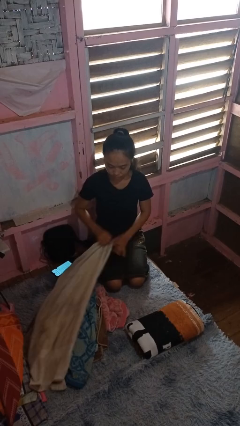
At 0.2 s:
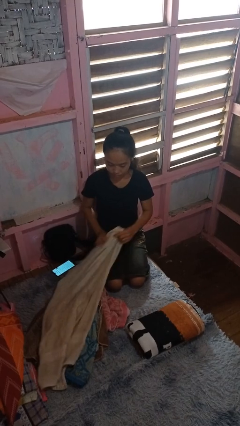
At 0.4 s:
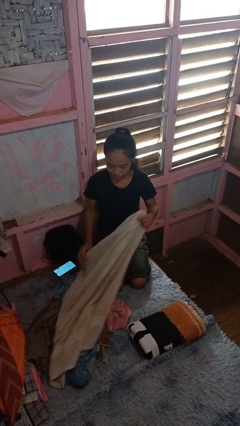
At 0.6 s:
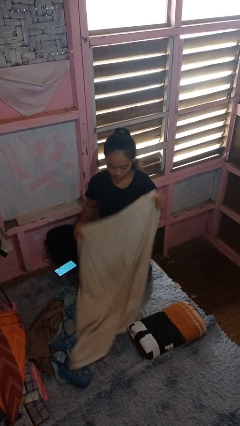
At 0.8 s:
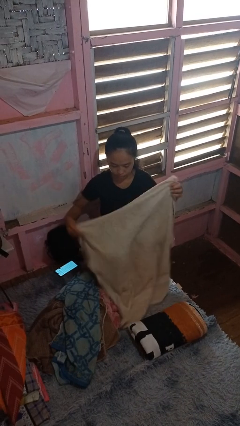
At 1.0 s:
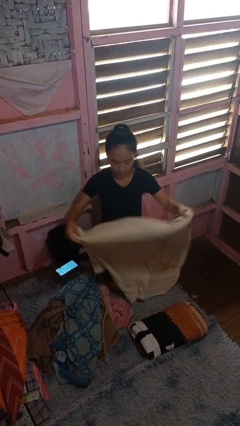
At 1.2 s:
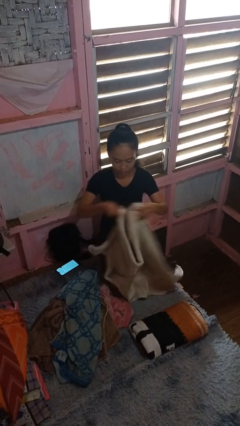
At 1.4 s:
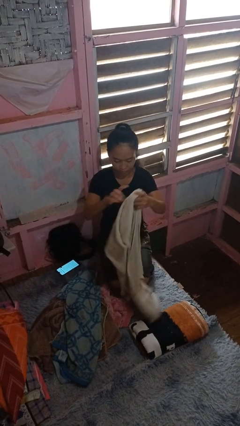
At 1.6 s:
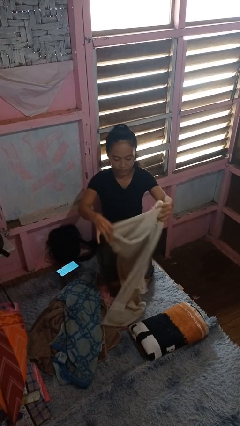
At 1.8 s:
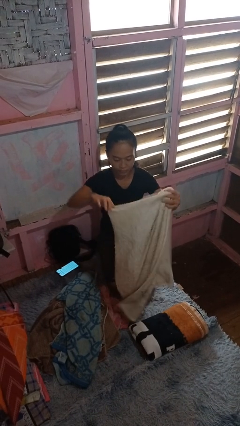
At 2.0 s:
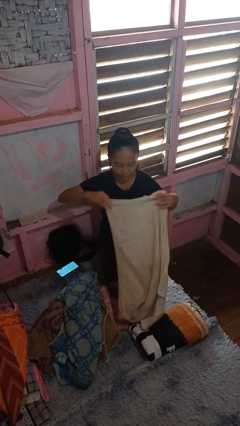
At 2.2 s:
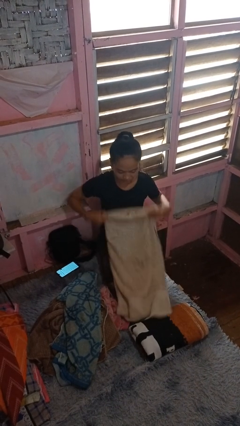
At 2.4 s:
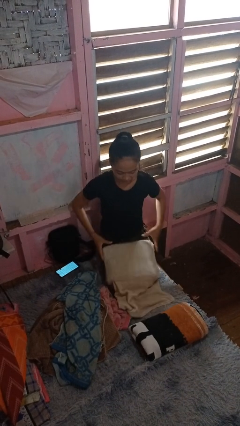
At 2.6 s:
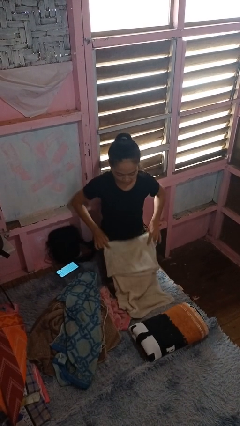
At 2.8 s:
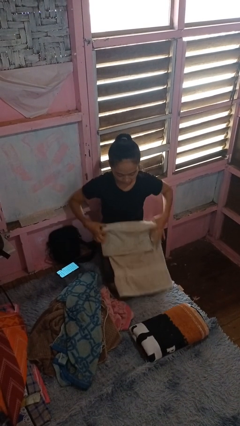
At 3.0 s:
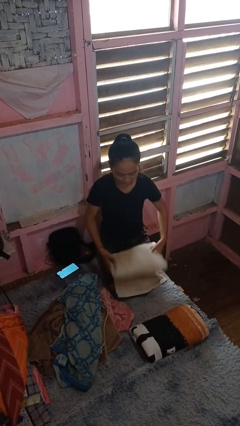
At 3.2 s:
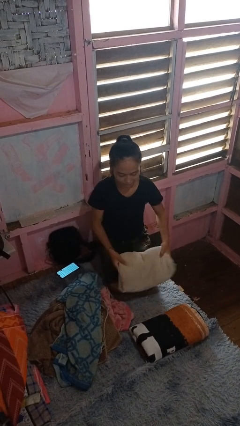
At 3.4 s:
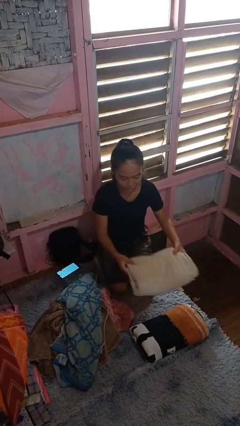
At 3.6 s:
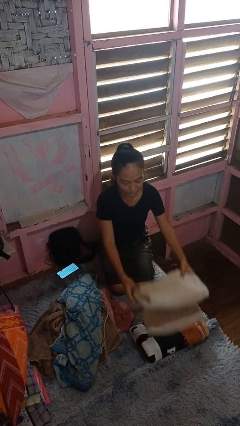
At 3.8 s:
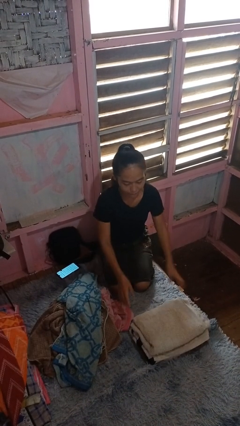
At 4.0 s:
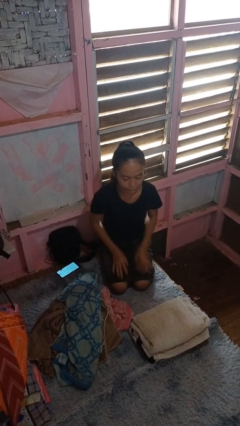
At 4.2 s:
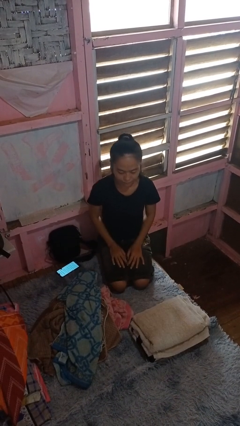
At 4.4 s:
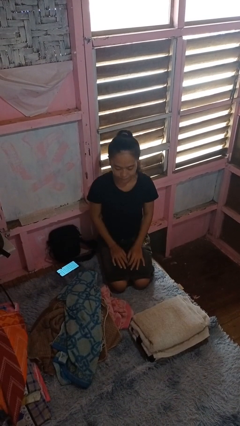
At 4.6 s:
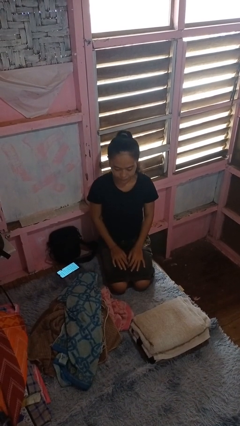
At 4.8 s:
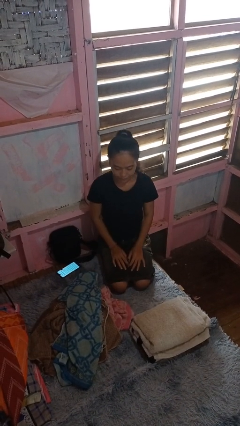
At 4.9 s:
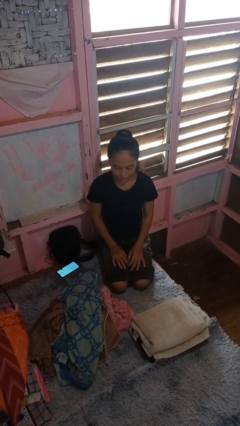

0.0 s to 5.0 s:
person folds towel

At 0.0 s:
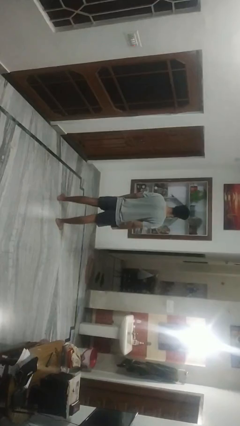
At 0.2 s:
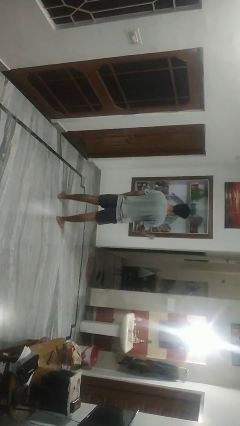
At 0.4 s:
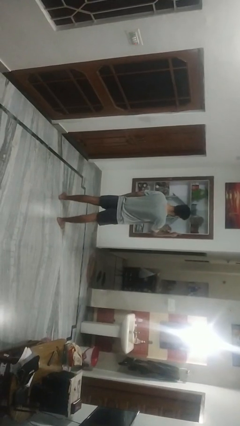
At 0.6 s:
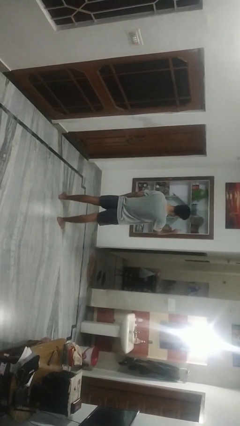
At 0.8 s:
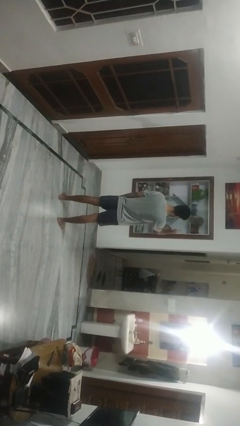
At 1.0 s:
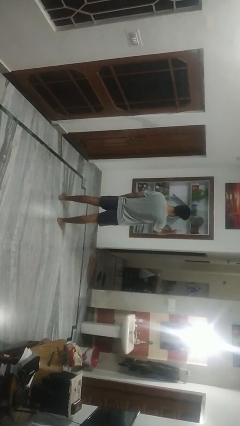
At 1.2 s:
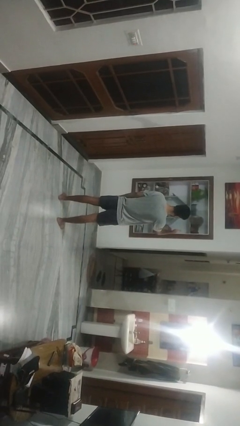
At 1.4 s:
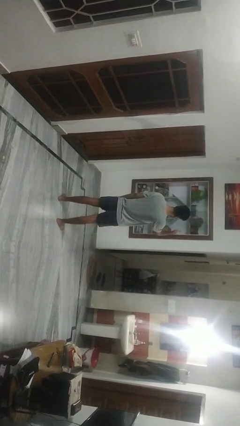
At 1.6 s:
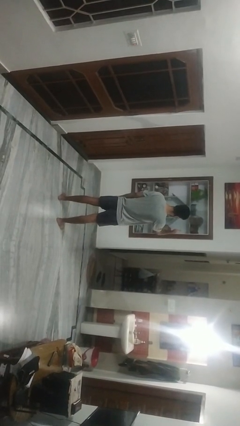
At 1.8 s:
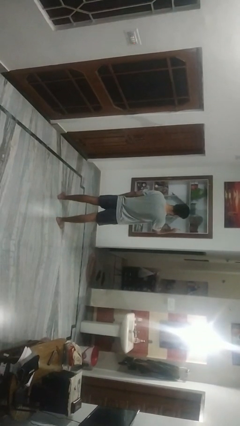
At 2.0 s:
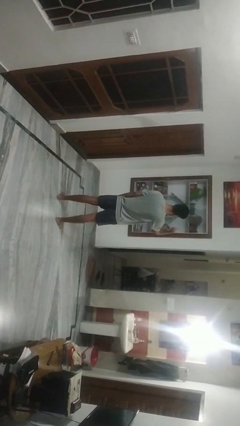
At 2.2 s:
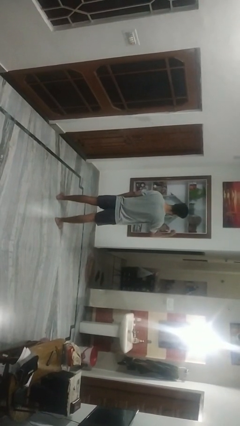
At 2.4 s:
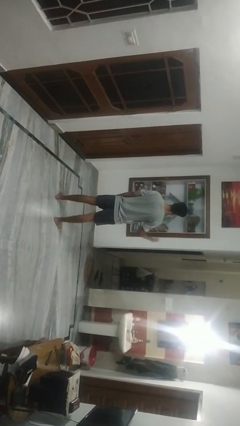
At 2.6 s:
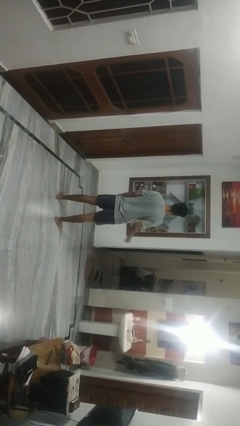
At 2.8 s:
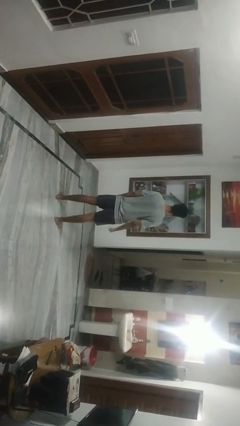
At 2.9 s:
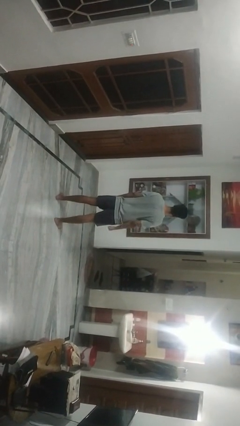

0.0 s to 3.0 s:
person gestures thumbs up

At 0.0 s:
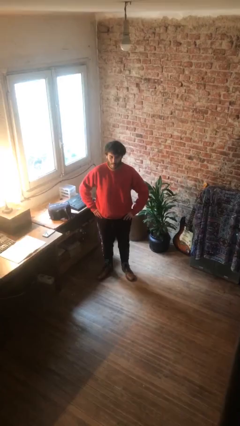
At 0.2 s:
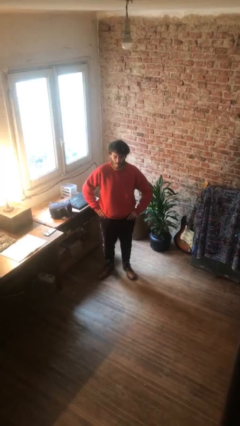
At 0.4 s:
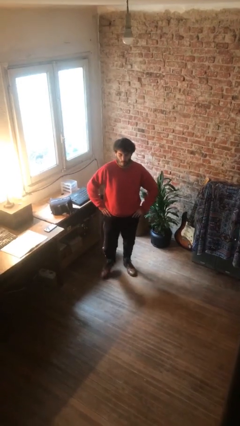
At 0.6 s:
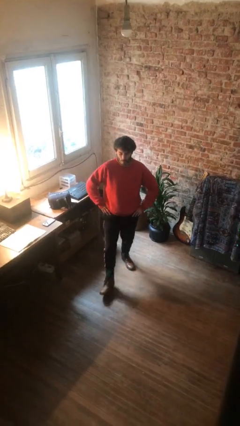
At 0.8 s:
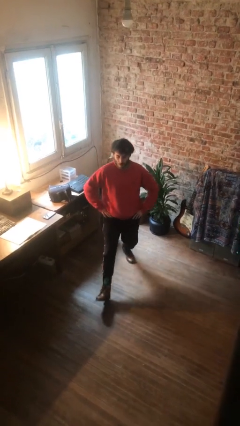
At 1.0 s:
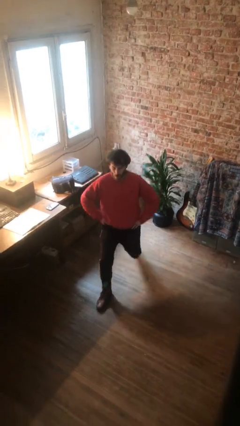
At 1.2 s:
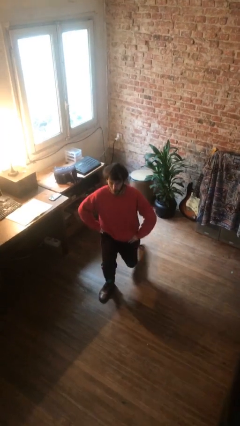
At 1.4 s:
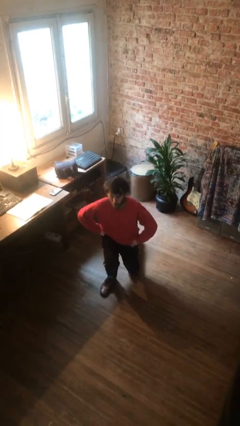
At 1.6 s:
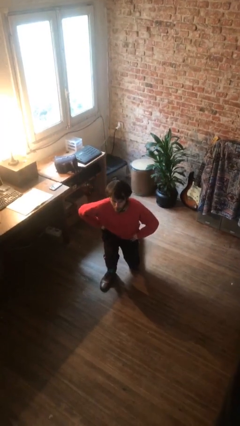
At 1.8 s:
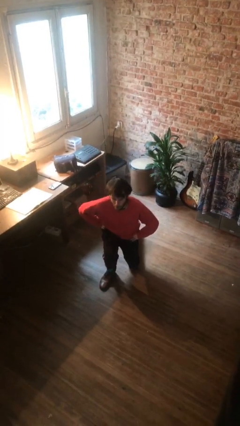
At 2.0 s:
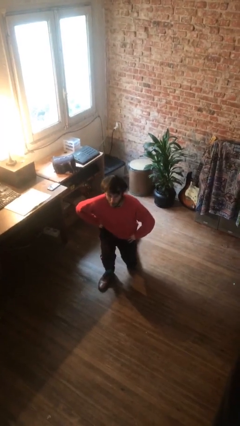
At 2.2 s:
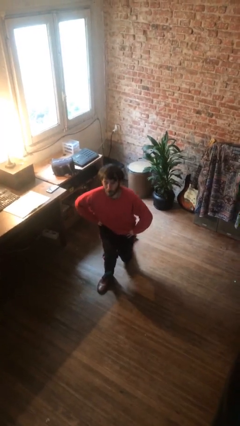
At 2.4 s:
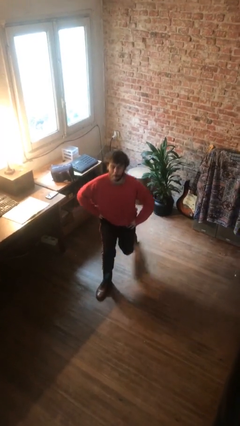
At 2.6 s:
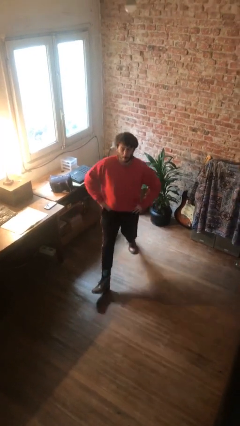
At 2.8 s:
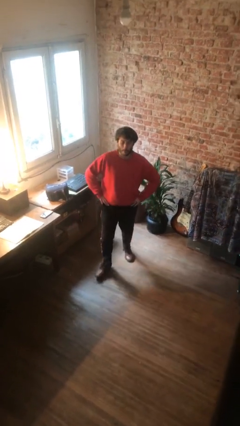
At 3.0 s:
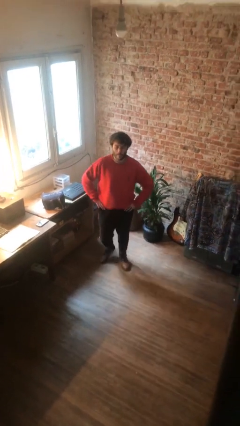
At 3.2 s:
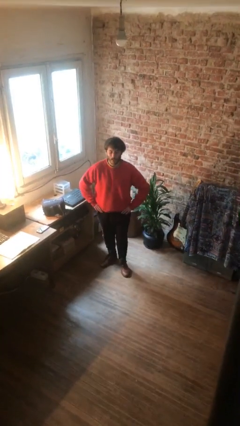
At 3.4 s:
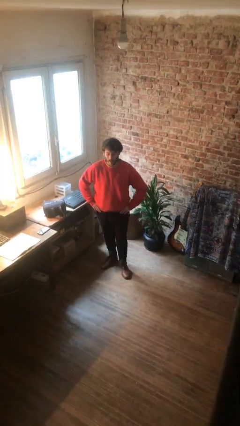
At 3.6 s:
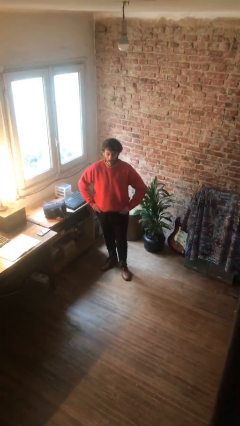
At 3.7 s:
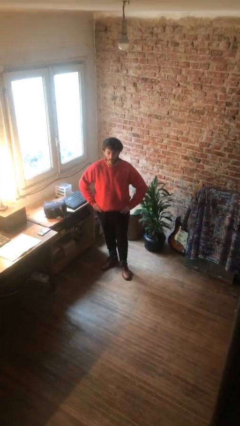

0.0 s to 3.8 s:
person exercises with lunges

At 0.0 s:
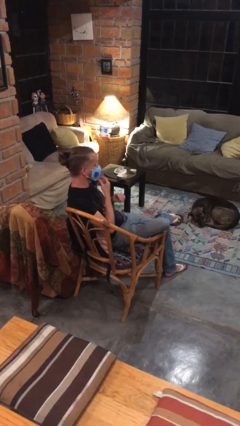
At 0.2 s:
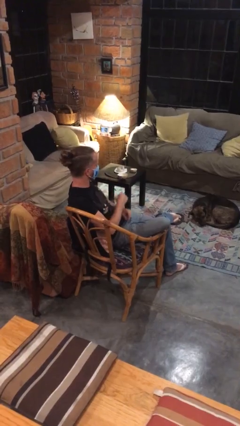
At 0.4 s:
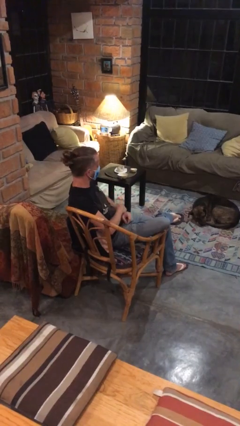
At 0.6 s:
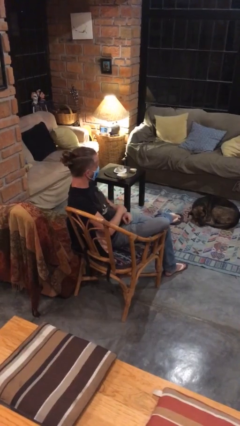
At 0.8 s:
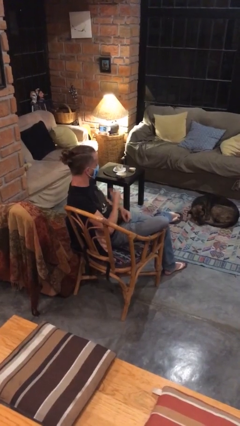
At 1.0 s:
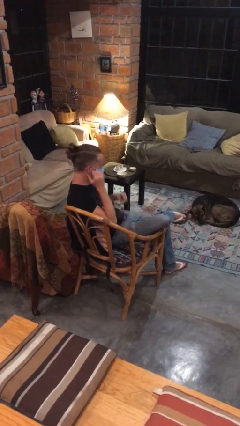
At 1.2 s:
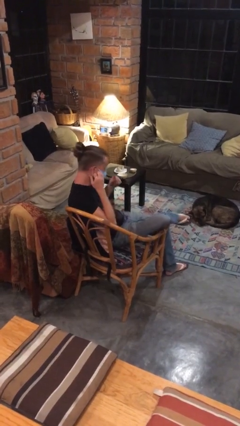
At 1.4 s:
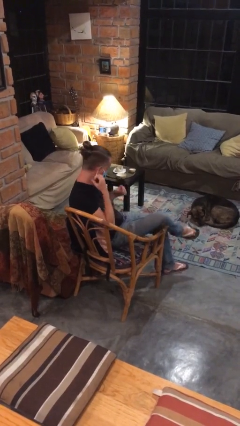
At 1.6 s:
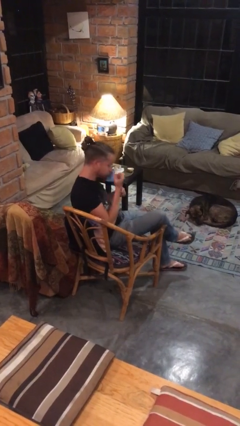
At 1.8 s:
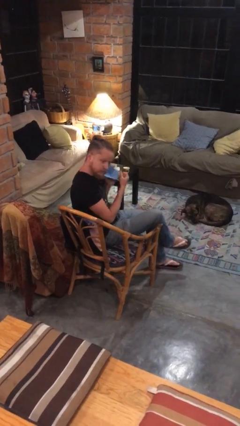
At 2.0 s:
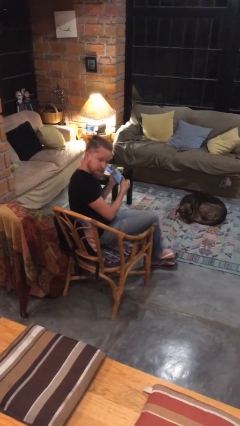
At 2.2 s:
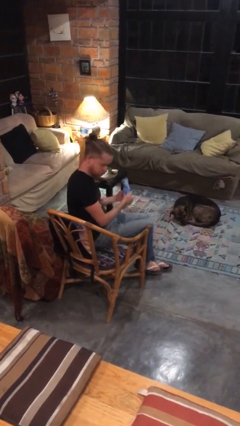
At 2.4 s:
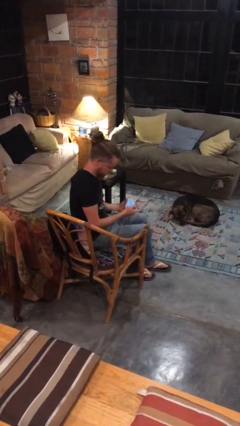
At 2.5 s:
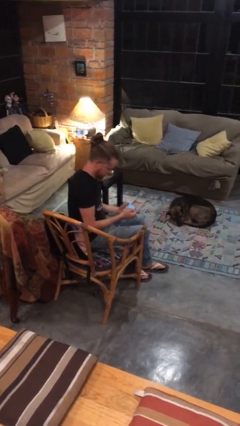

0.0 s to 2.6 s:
person takes off facemask

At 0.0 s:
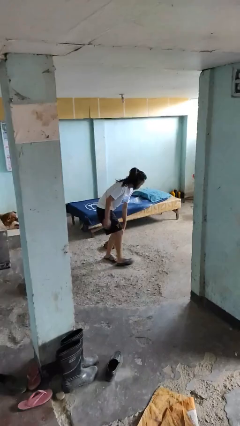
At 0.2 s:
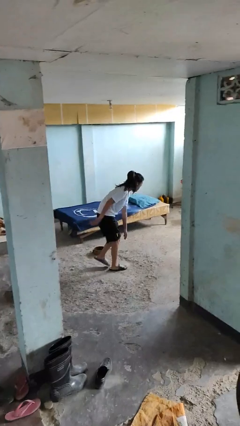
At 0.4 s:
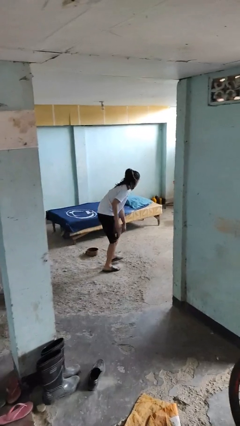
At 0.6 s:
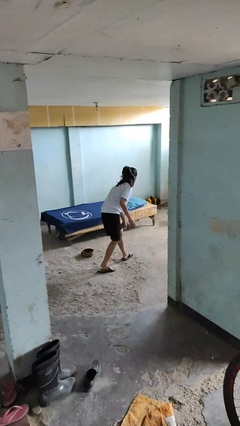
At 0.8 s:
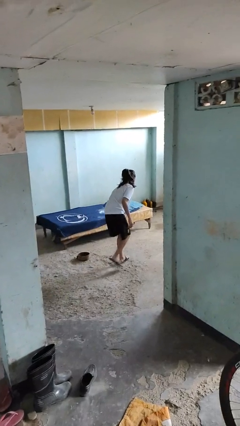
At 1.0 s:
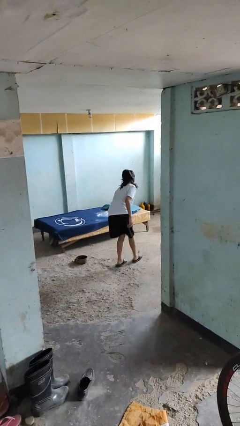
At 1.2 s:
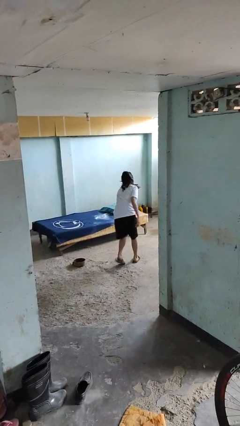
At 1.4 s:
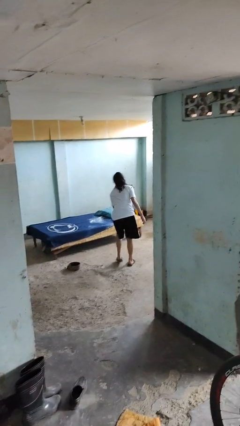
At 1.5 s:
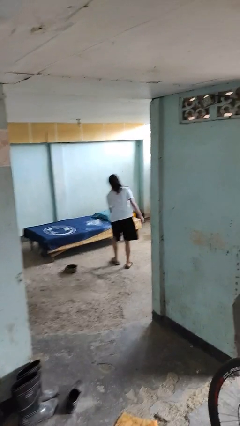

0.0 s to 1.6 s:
person stands up from floor

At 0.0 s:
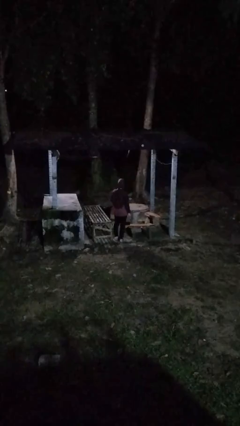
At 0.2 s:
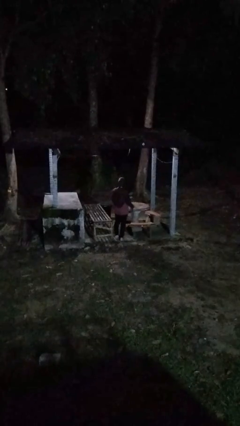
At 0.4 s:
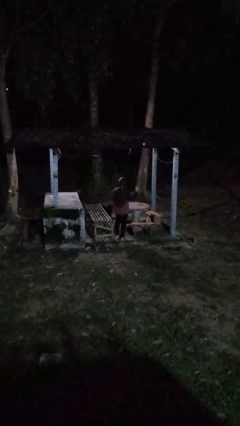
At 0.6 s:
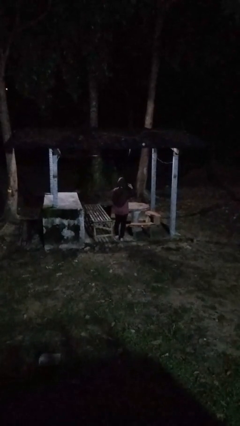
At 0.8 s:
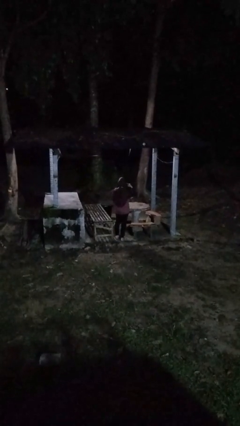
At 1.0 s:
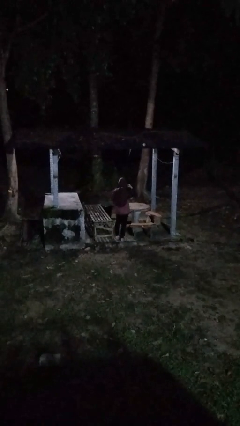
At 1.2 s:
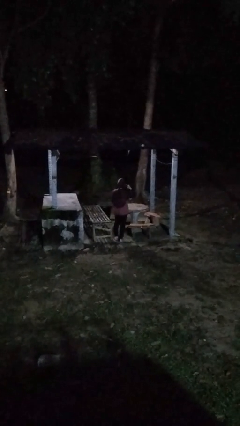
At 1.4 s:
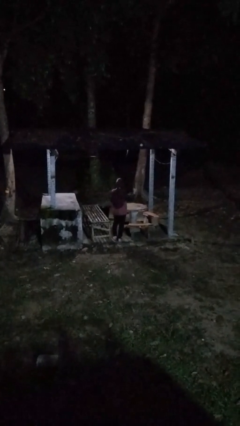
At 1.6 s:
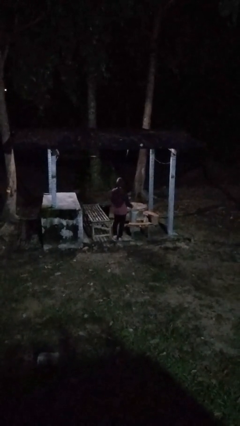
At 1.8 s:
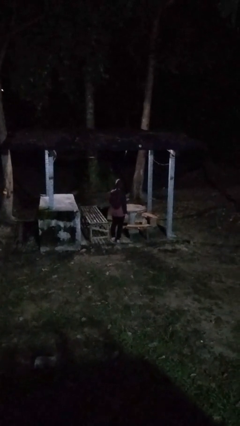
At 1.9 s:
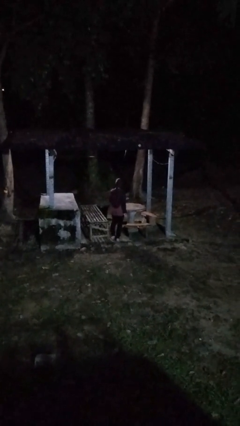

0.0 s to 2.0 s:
person gestures listen closely
